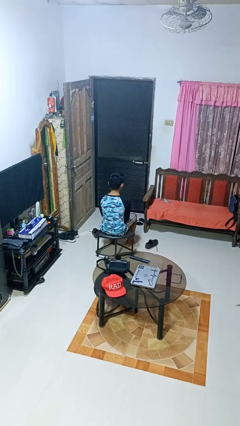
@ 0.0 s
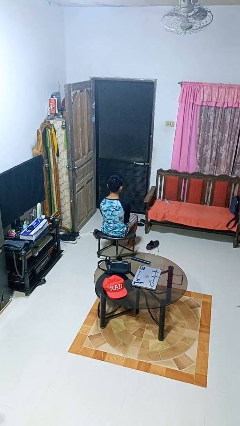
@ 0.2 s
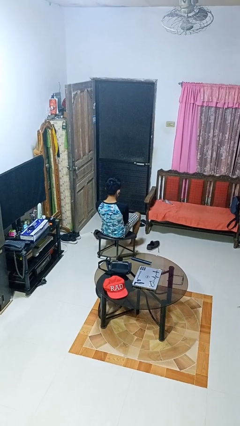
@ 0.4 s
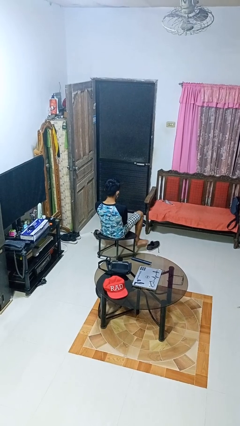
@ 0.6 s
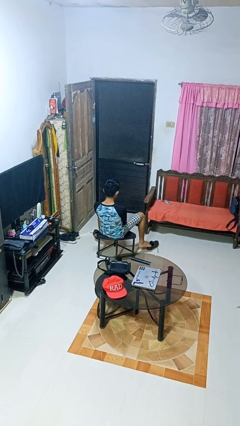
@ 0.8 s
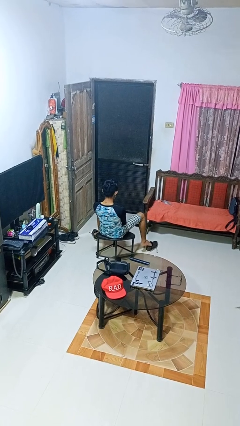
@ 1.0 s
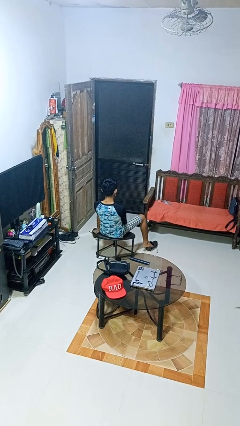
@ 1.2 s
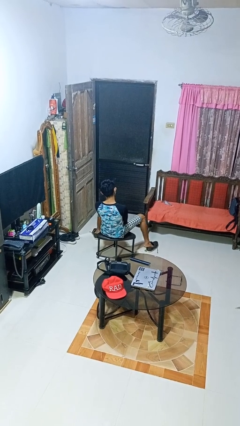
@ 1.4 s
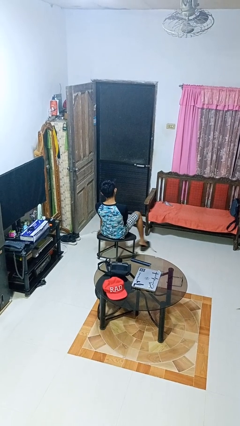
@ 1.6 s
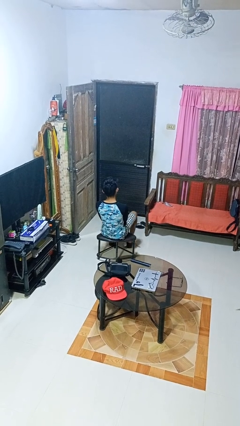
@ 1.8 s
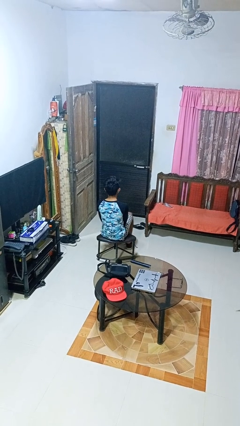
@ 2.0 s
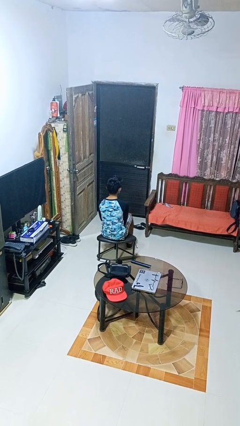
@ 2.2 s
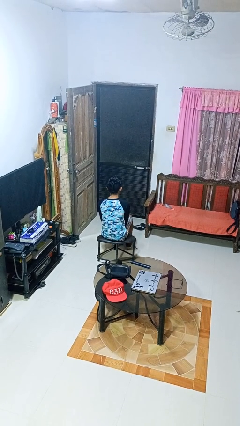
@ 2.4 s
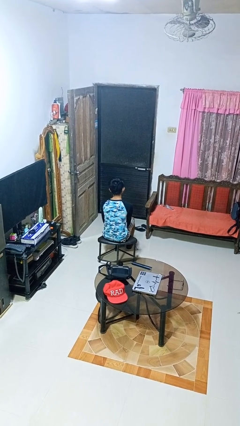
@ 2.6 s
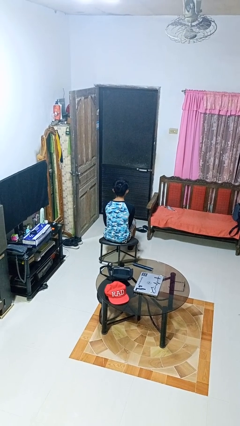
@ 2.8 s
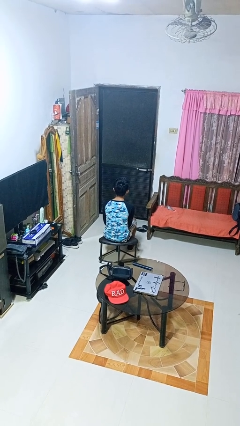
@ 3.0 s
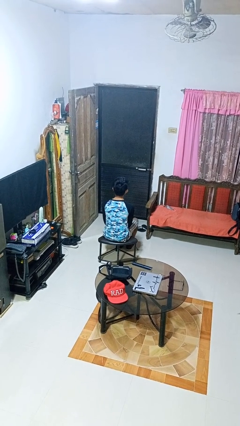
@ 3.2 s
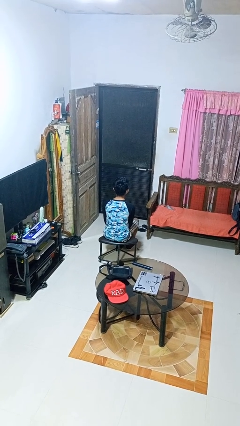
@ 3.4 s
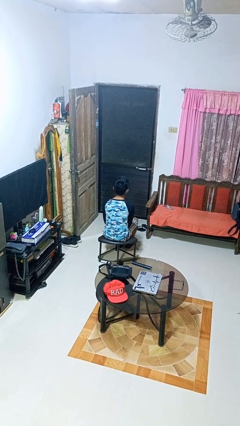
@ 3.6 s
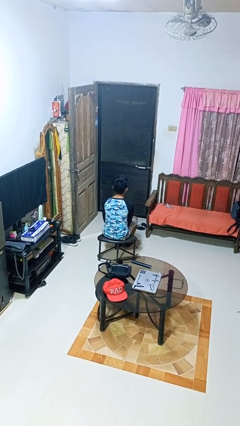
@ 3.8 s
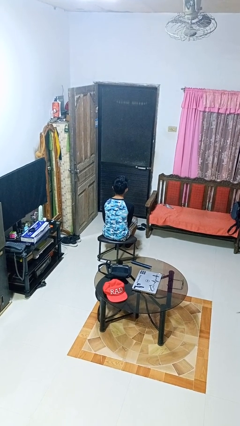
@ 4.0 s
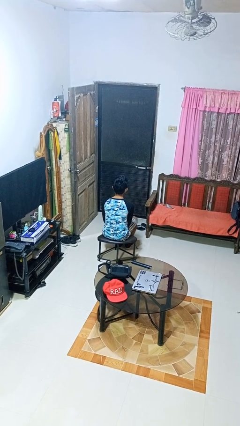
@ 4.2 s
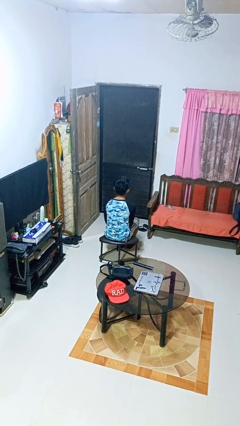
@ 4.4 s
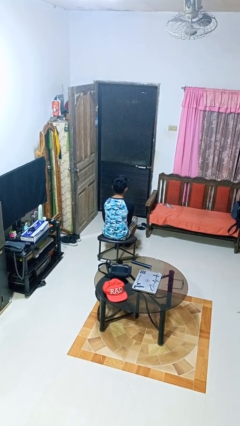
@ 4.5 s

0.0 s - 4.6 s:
person puts on shoes

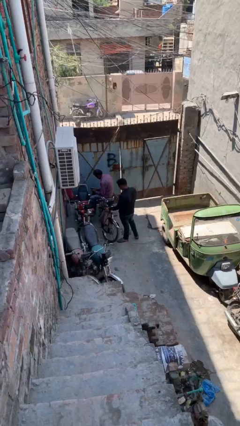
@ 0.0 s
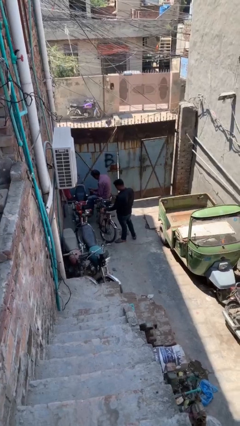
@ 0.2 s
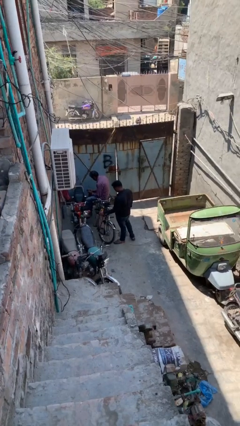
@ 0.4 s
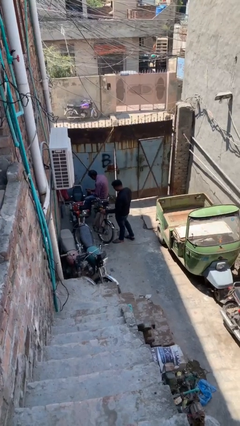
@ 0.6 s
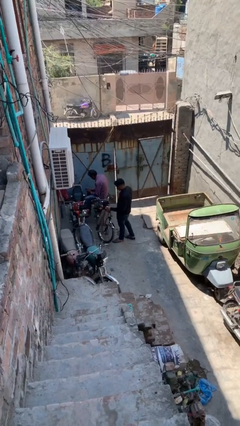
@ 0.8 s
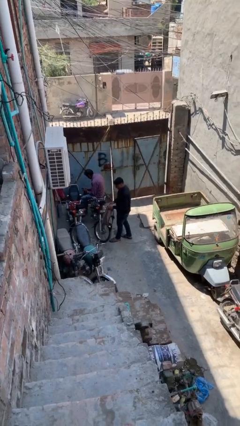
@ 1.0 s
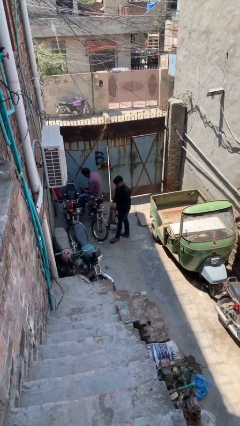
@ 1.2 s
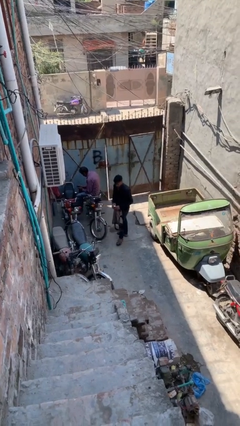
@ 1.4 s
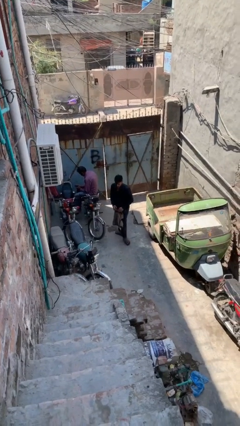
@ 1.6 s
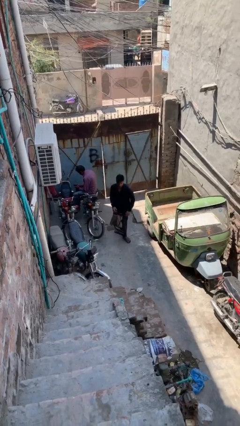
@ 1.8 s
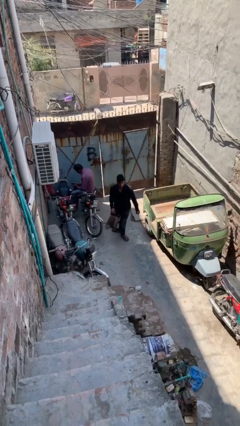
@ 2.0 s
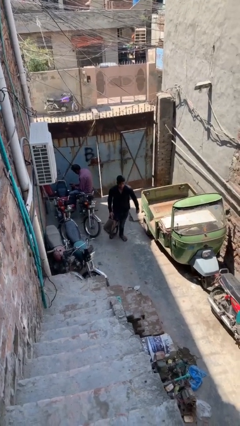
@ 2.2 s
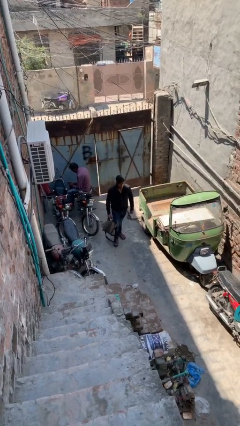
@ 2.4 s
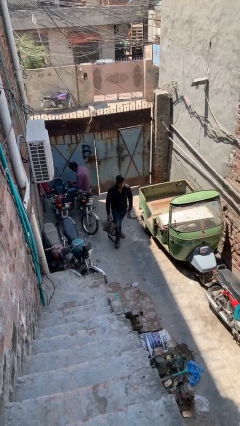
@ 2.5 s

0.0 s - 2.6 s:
person steals object from person

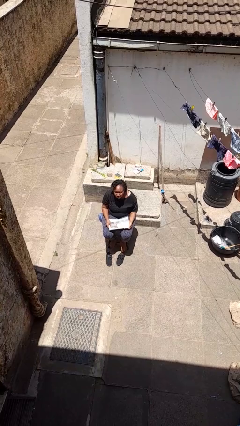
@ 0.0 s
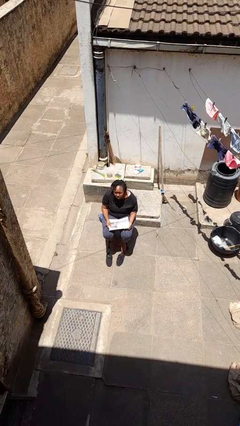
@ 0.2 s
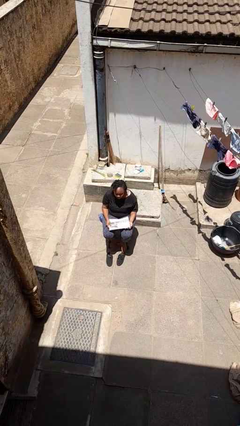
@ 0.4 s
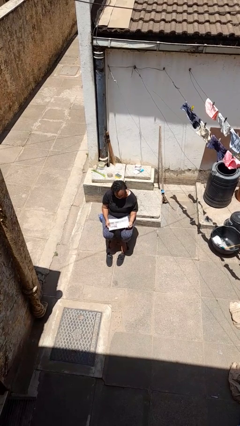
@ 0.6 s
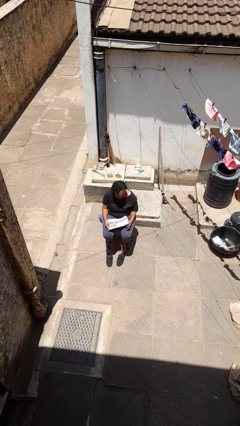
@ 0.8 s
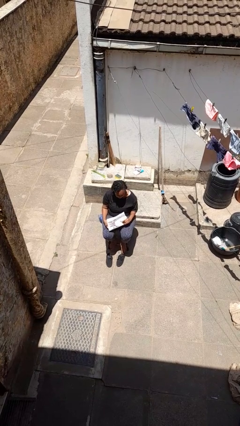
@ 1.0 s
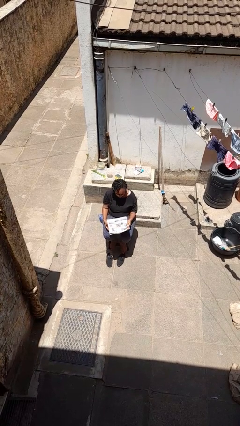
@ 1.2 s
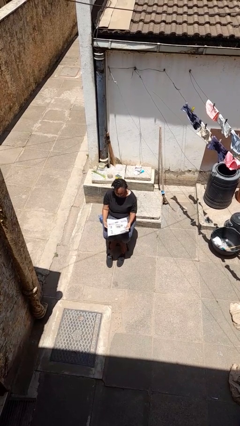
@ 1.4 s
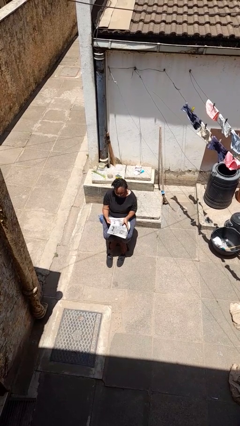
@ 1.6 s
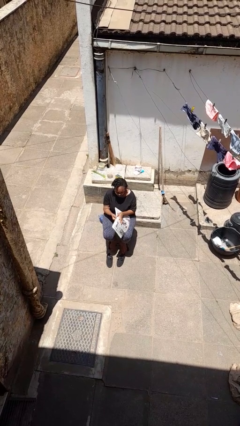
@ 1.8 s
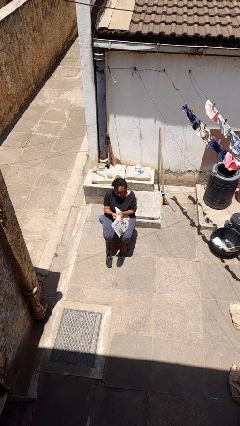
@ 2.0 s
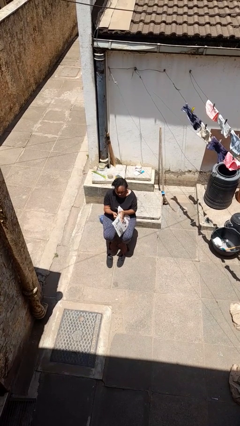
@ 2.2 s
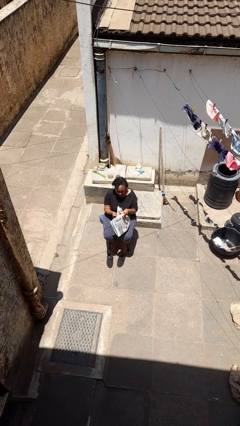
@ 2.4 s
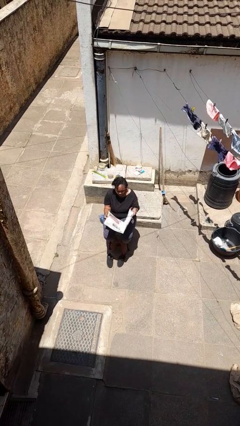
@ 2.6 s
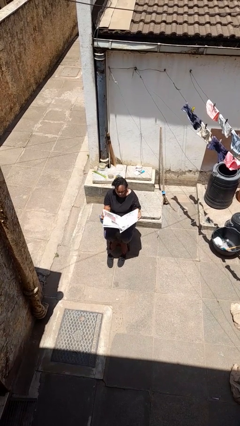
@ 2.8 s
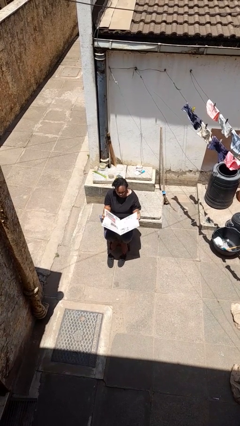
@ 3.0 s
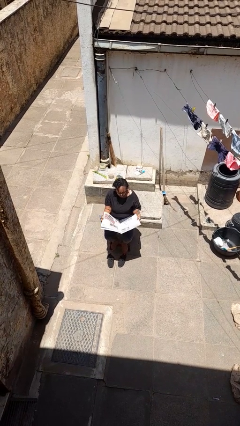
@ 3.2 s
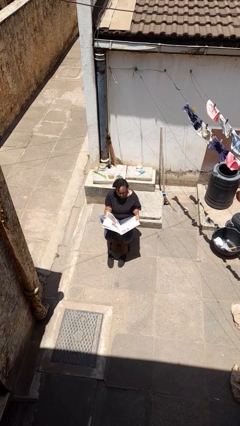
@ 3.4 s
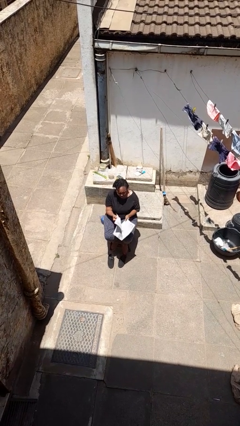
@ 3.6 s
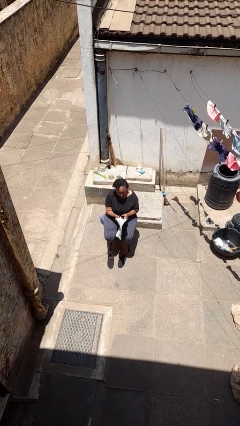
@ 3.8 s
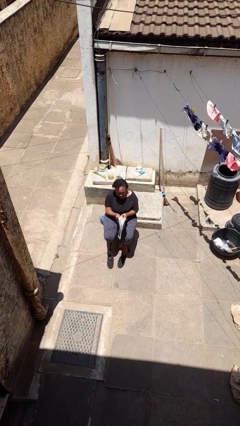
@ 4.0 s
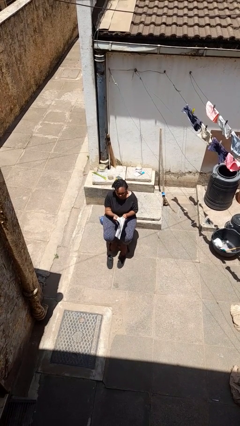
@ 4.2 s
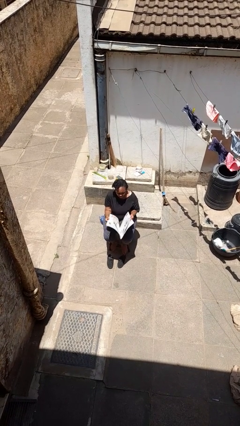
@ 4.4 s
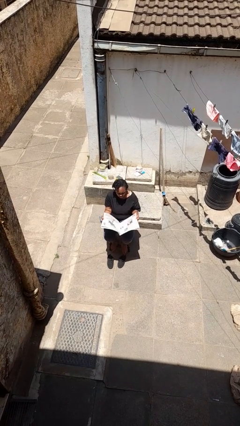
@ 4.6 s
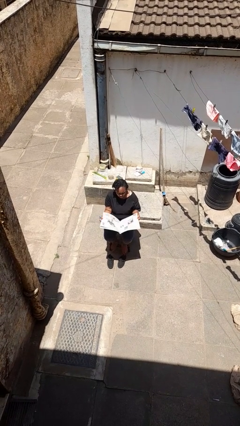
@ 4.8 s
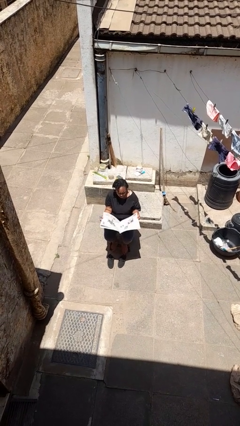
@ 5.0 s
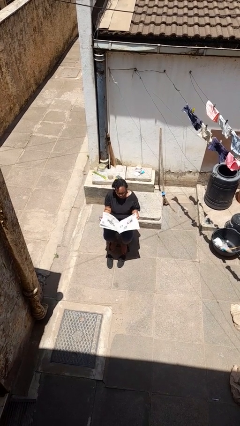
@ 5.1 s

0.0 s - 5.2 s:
person reads newspaper

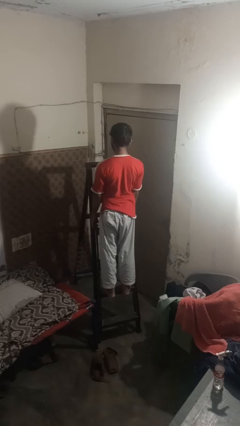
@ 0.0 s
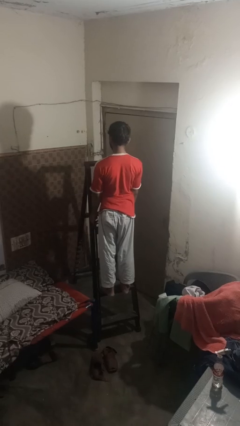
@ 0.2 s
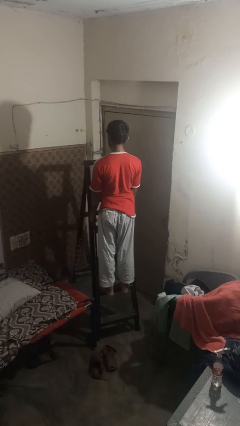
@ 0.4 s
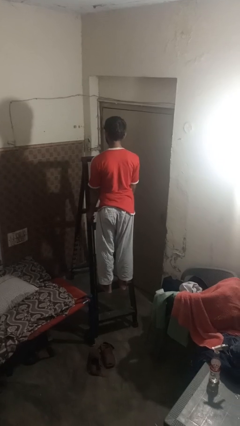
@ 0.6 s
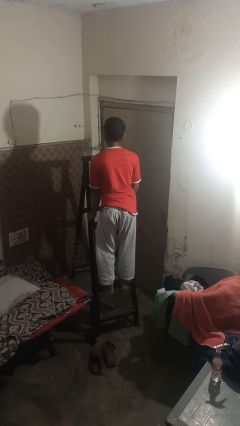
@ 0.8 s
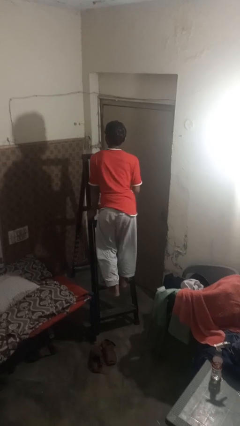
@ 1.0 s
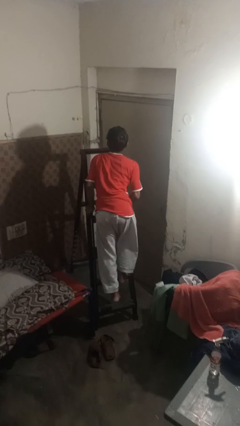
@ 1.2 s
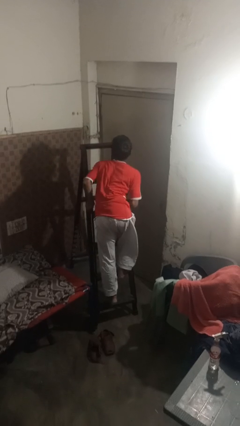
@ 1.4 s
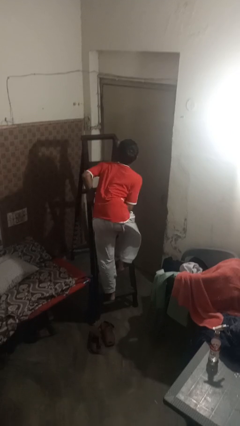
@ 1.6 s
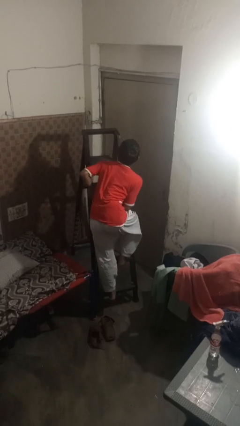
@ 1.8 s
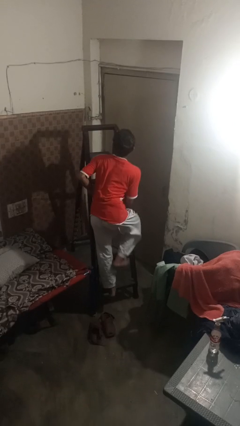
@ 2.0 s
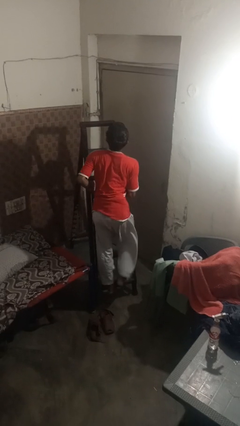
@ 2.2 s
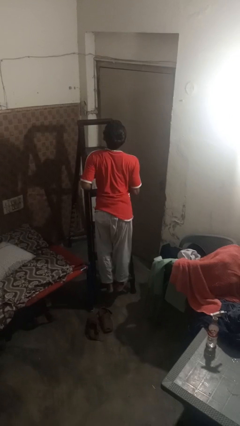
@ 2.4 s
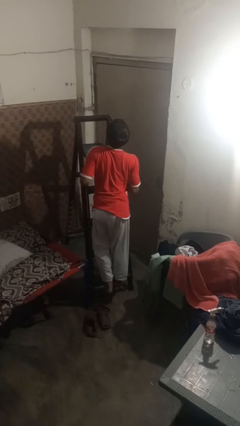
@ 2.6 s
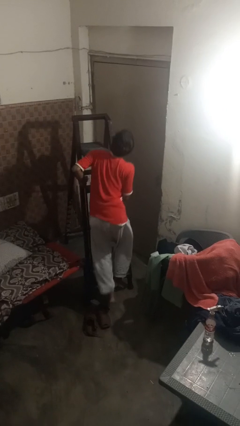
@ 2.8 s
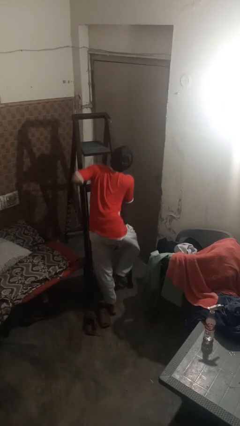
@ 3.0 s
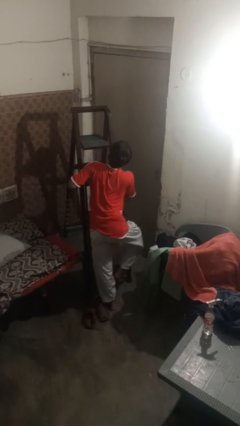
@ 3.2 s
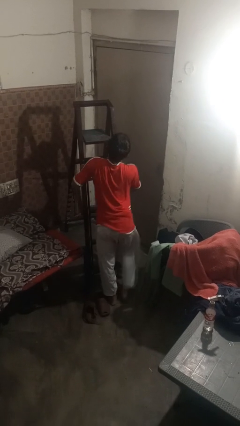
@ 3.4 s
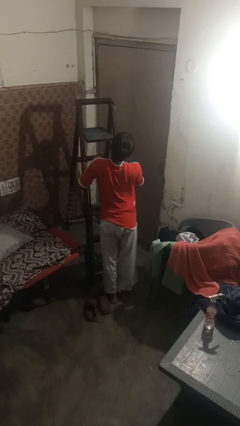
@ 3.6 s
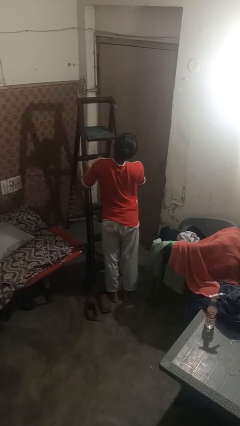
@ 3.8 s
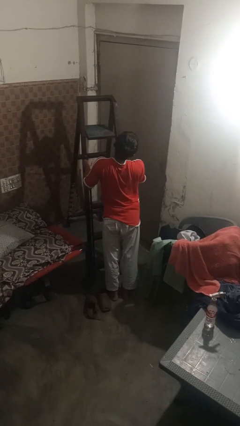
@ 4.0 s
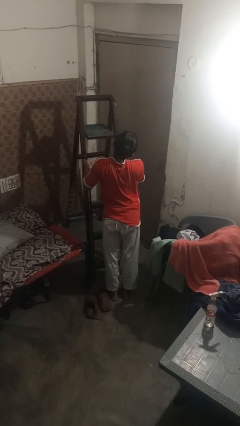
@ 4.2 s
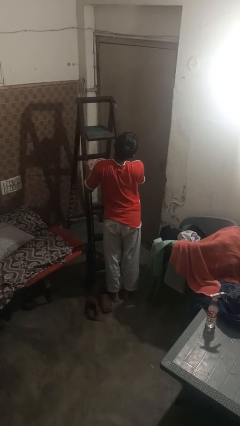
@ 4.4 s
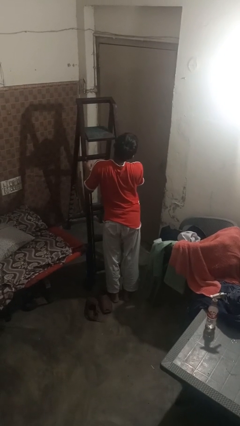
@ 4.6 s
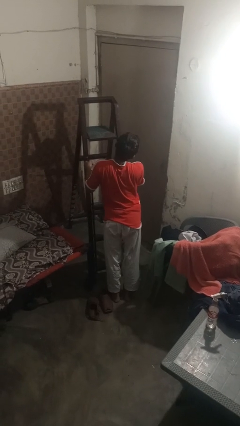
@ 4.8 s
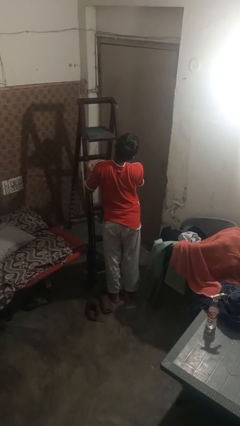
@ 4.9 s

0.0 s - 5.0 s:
person climbs down ladder

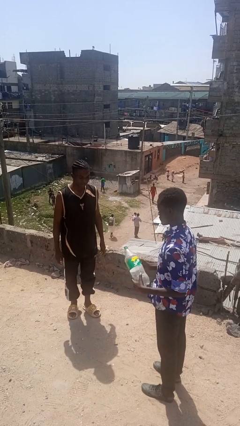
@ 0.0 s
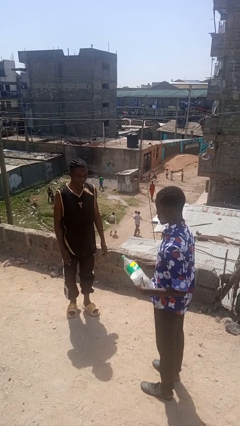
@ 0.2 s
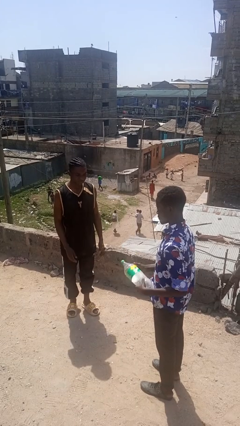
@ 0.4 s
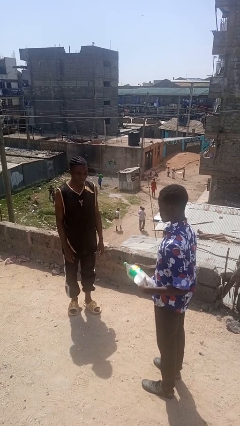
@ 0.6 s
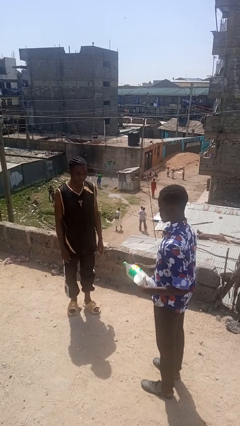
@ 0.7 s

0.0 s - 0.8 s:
person catches object from person
